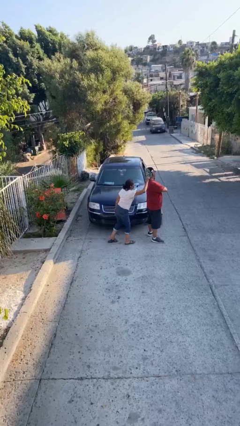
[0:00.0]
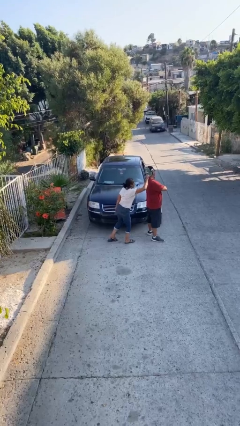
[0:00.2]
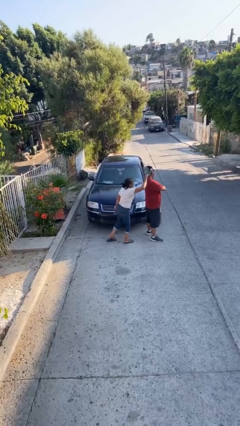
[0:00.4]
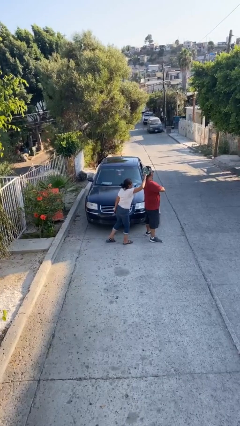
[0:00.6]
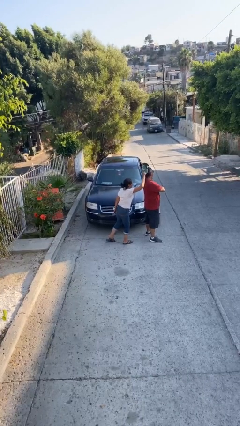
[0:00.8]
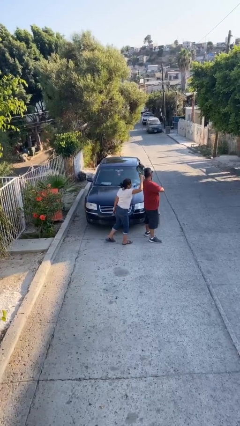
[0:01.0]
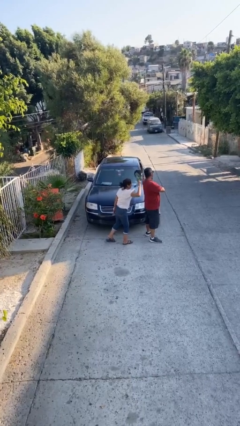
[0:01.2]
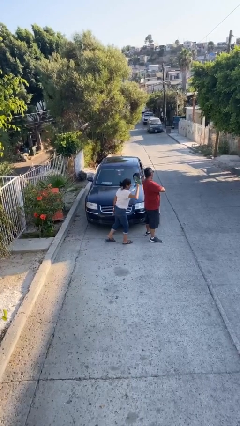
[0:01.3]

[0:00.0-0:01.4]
person steals object from person

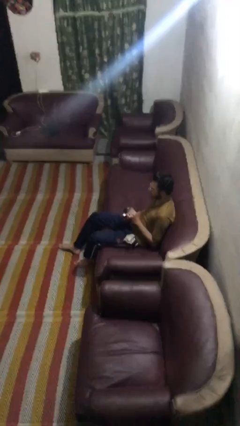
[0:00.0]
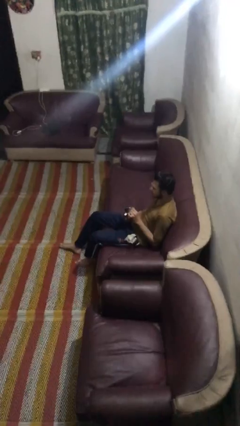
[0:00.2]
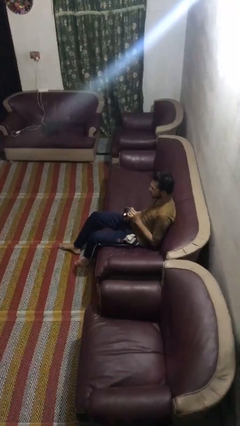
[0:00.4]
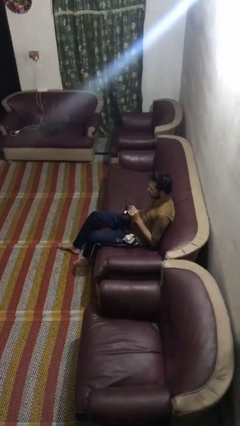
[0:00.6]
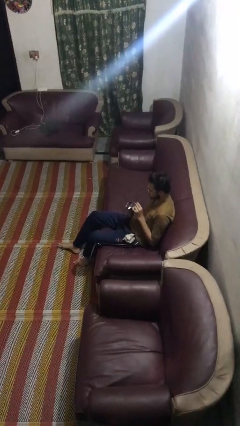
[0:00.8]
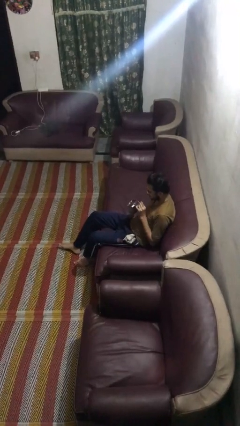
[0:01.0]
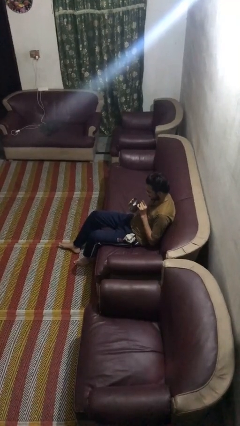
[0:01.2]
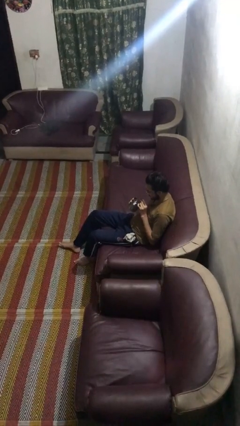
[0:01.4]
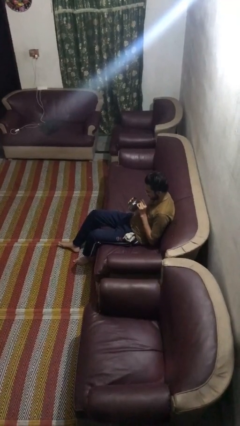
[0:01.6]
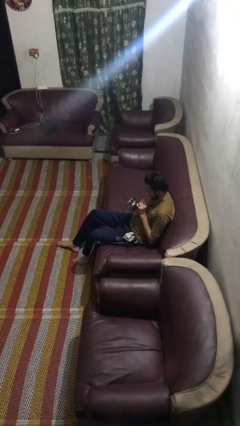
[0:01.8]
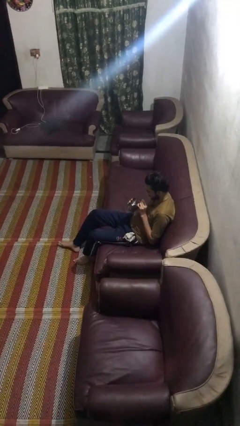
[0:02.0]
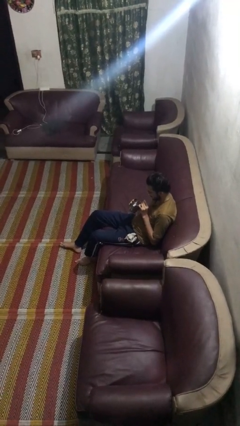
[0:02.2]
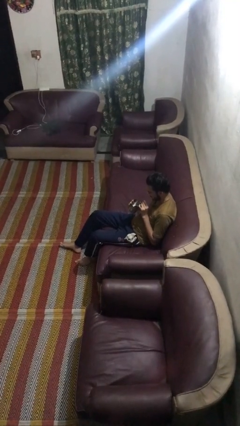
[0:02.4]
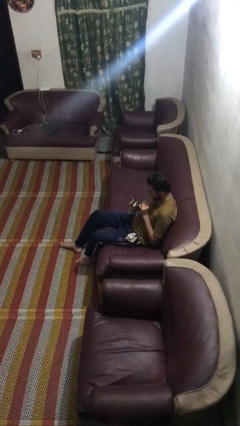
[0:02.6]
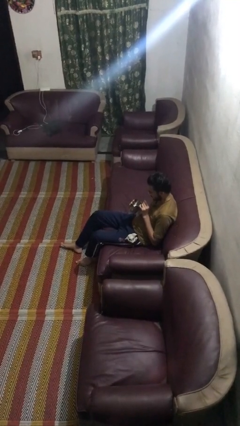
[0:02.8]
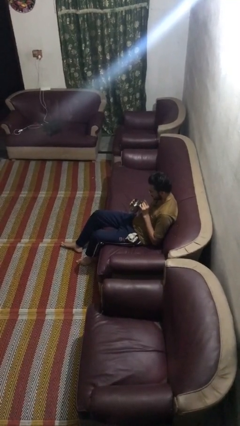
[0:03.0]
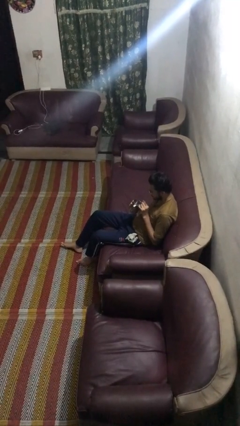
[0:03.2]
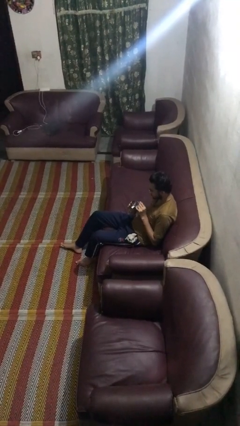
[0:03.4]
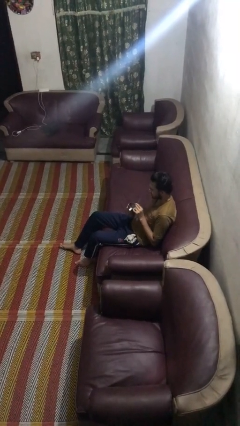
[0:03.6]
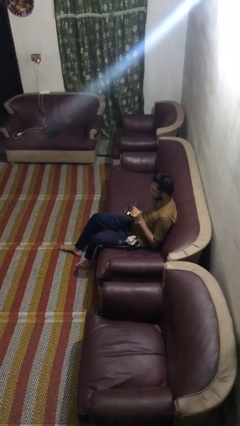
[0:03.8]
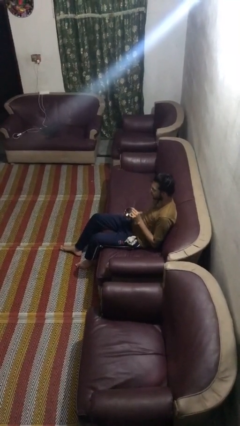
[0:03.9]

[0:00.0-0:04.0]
person drinks from straw

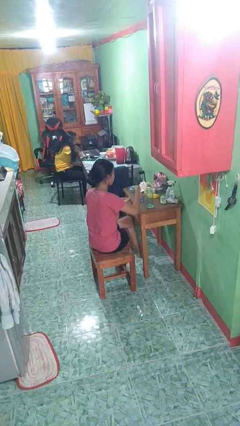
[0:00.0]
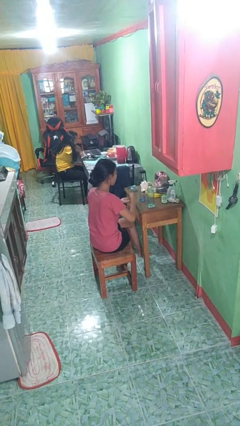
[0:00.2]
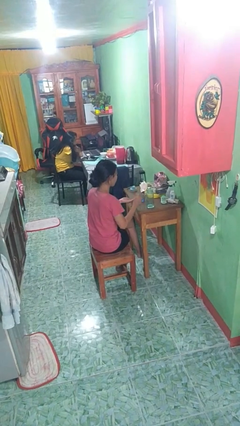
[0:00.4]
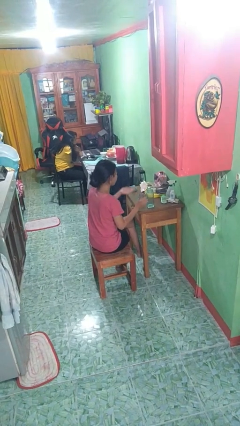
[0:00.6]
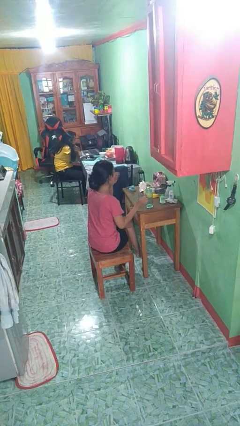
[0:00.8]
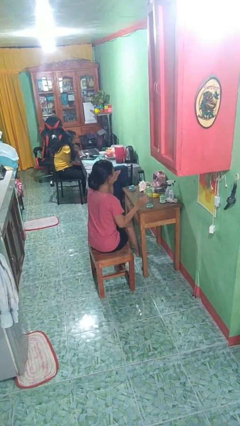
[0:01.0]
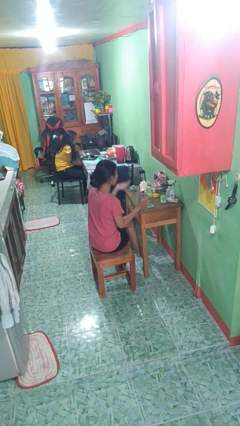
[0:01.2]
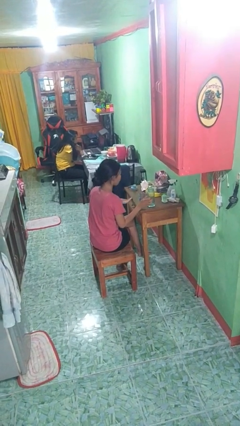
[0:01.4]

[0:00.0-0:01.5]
person takes medicine pills

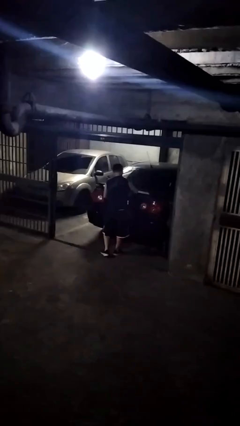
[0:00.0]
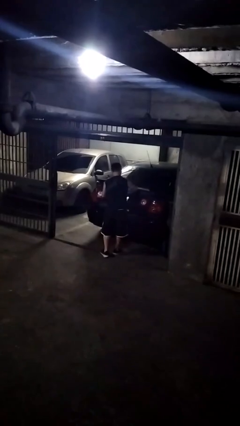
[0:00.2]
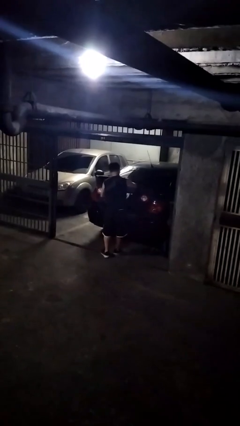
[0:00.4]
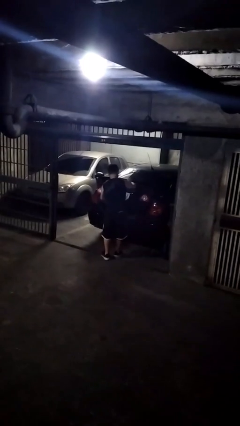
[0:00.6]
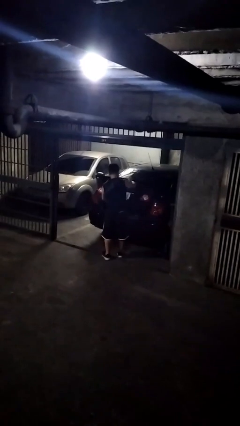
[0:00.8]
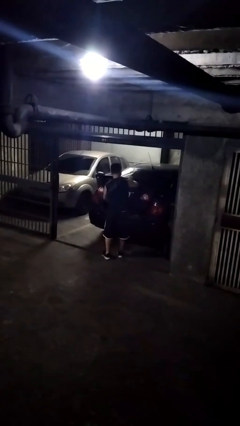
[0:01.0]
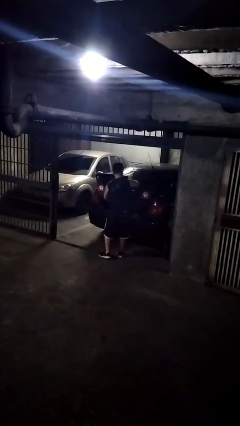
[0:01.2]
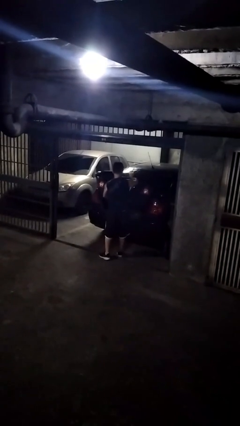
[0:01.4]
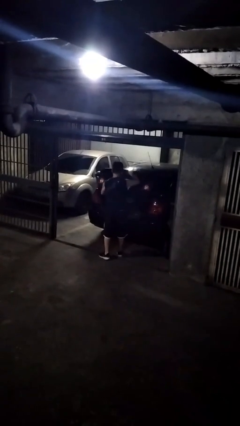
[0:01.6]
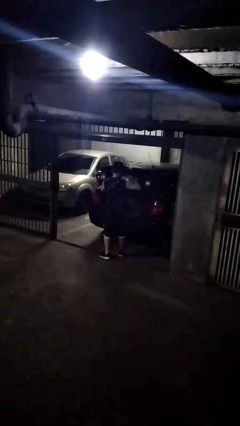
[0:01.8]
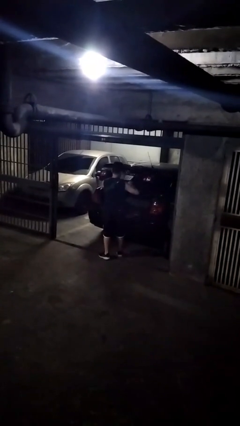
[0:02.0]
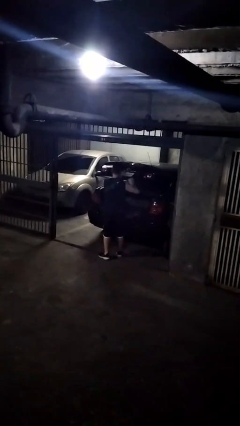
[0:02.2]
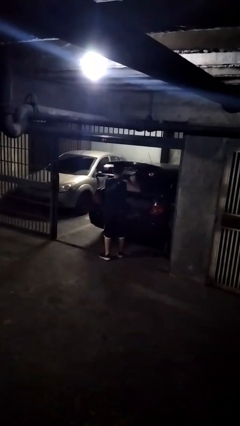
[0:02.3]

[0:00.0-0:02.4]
person opens car trunk

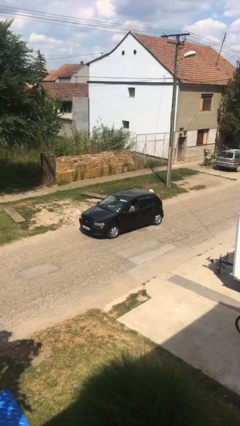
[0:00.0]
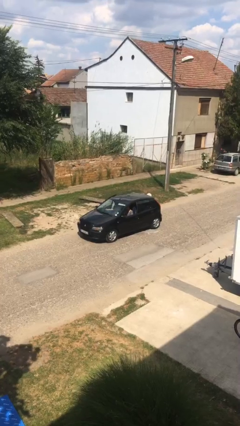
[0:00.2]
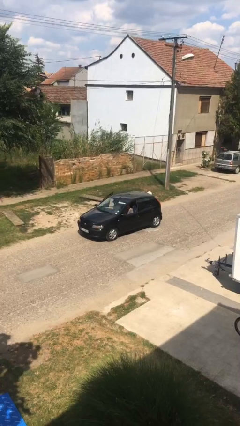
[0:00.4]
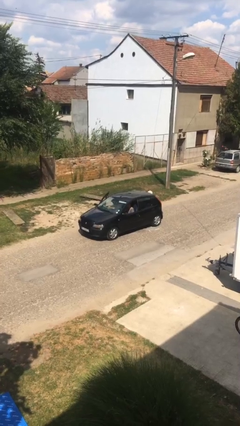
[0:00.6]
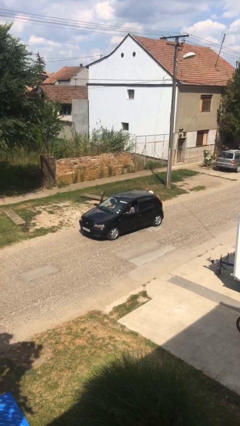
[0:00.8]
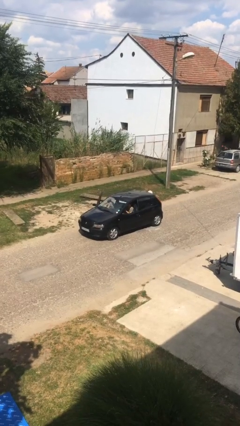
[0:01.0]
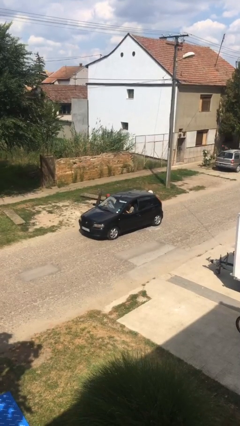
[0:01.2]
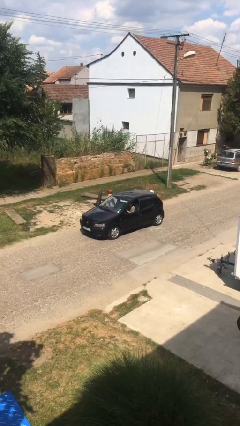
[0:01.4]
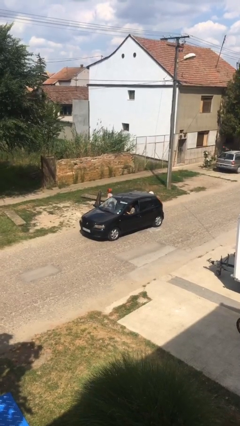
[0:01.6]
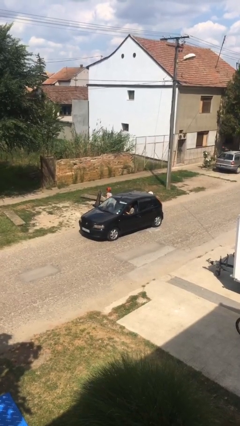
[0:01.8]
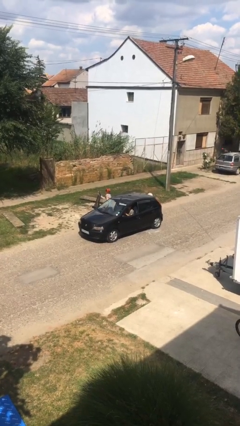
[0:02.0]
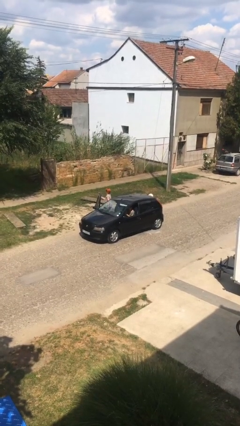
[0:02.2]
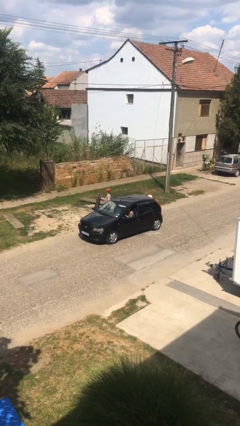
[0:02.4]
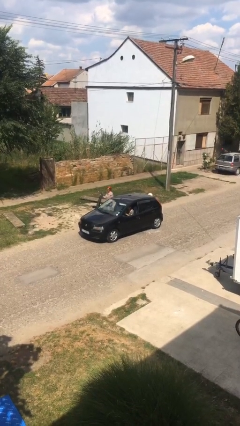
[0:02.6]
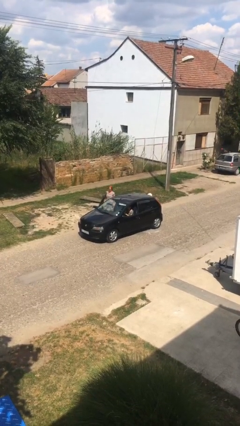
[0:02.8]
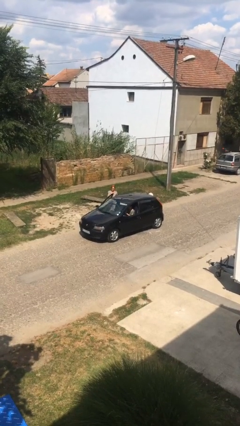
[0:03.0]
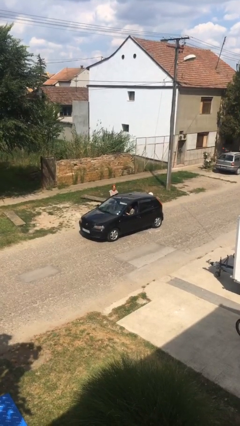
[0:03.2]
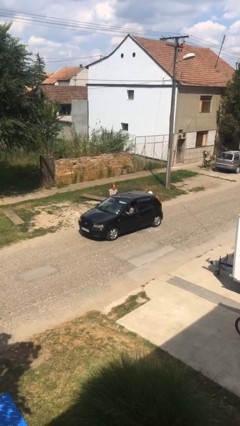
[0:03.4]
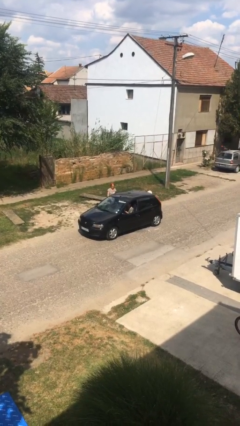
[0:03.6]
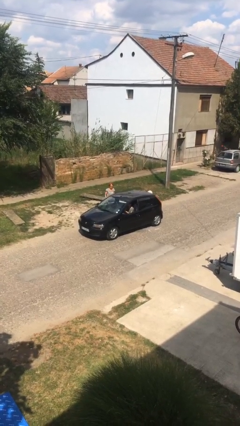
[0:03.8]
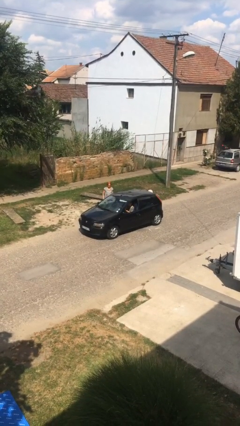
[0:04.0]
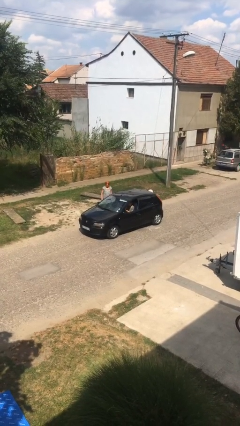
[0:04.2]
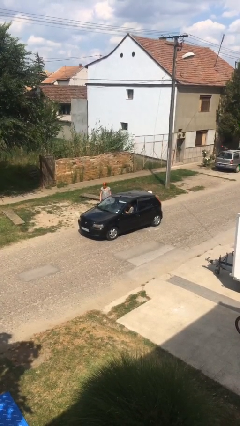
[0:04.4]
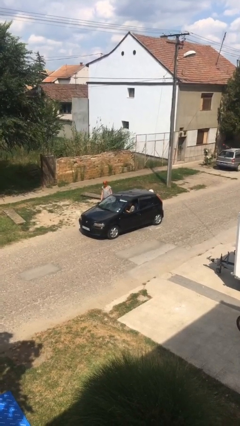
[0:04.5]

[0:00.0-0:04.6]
car drops off person

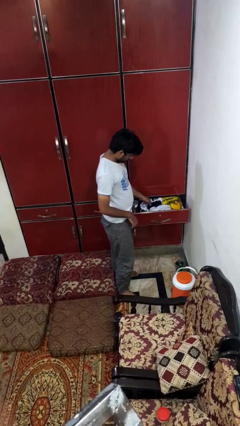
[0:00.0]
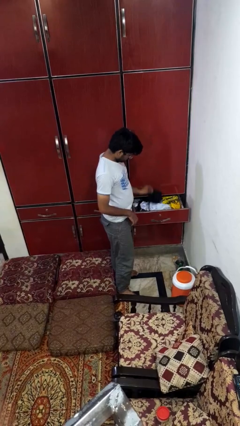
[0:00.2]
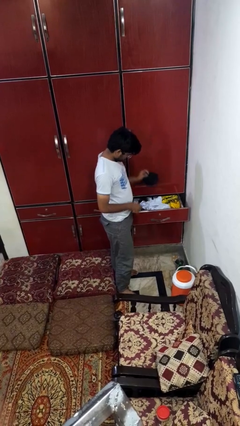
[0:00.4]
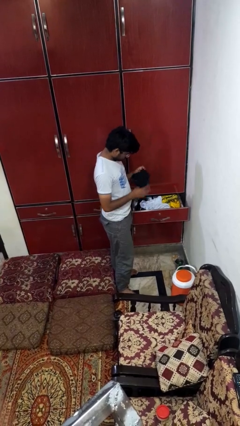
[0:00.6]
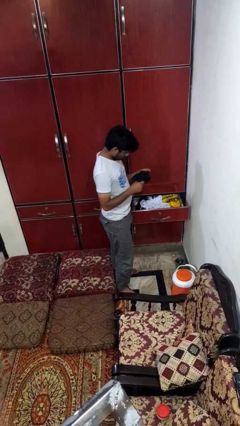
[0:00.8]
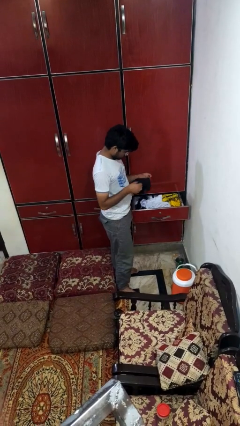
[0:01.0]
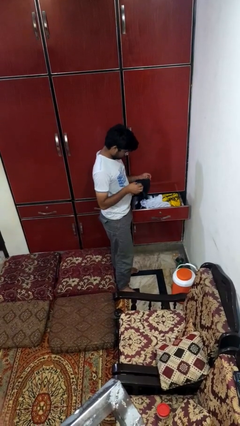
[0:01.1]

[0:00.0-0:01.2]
person takes clothes from dresser

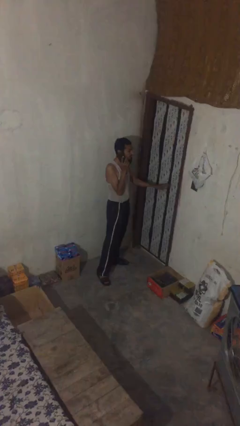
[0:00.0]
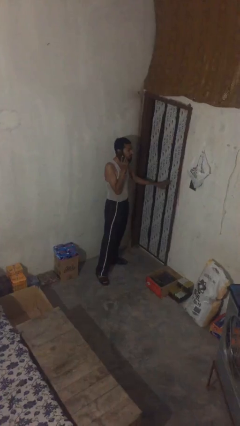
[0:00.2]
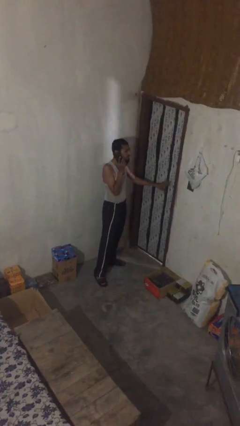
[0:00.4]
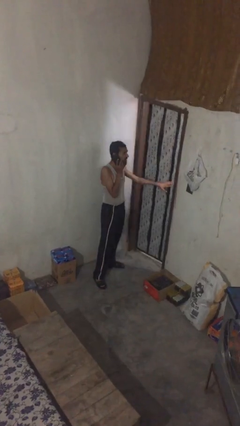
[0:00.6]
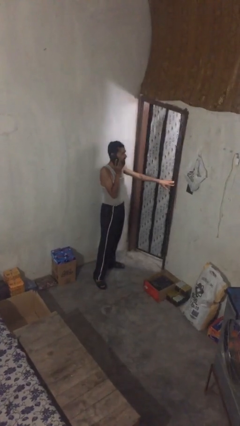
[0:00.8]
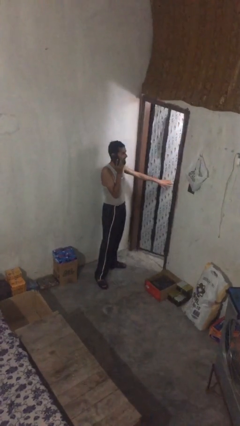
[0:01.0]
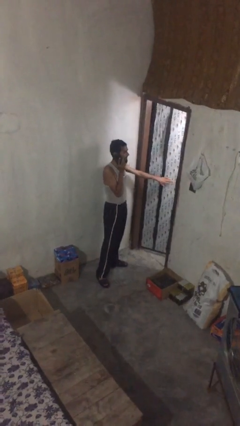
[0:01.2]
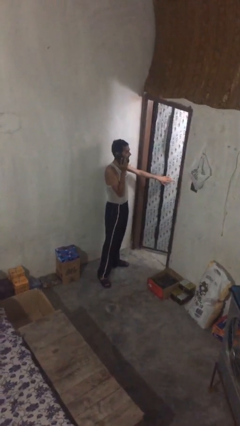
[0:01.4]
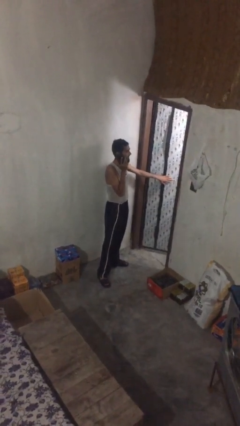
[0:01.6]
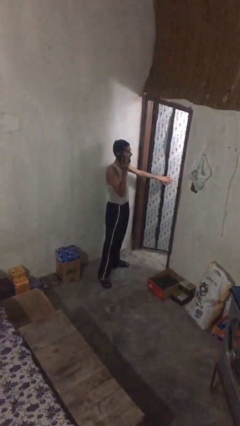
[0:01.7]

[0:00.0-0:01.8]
person opens facility door
